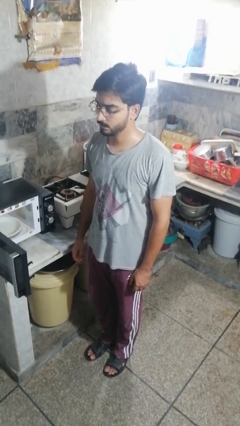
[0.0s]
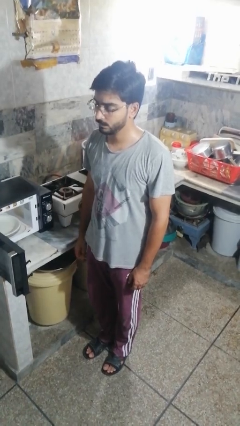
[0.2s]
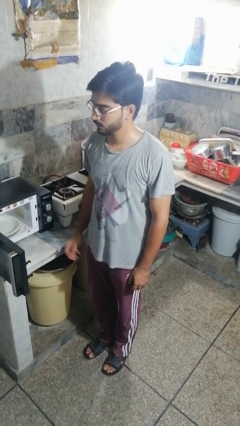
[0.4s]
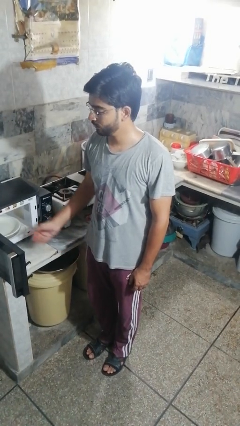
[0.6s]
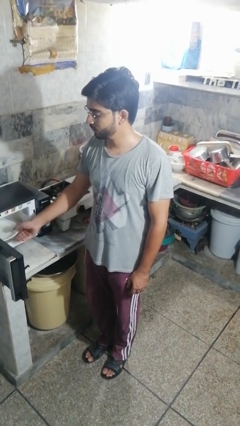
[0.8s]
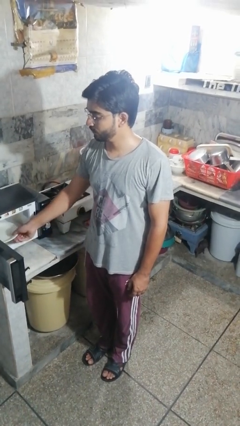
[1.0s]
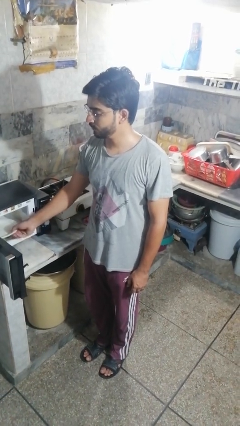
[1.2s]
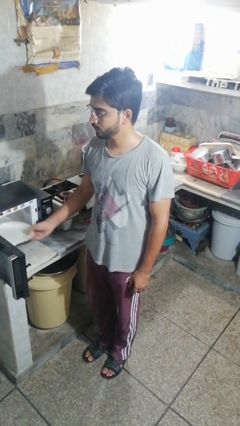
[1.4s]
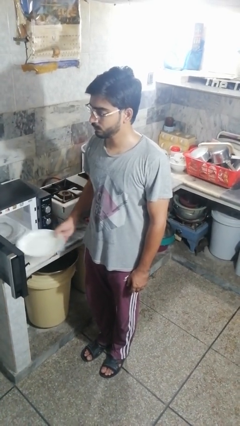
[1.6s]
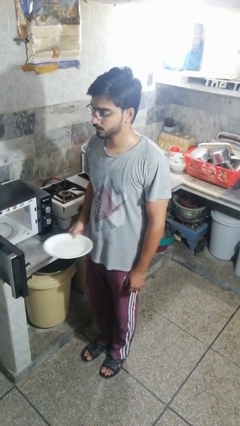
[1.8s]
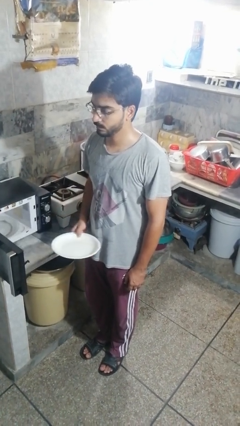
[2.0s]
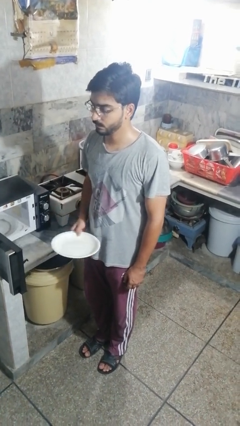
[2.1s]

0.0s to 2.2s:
person takes object from oven

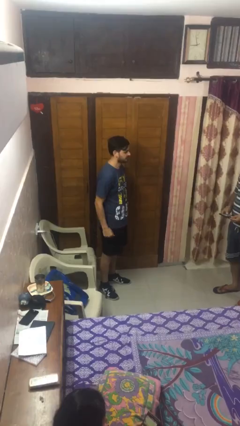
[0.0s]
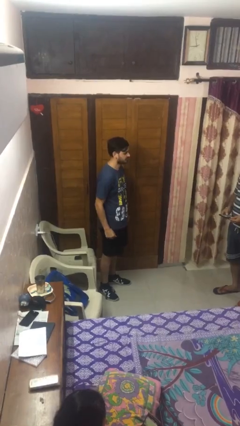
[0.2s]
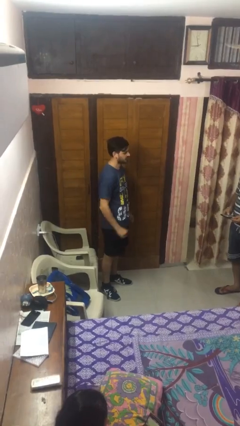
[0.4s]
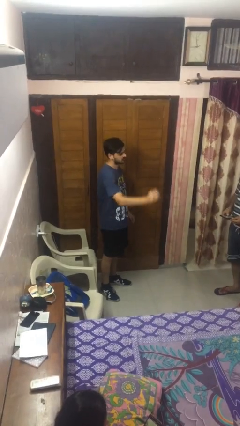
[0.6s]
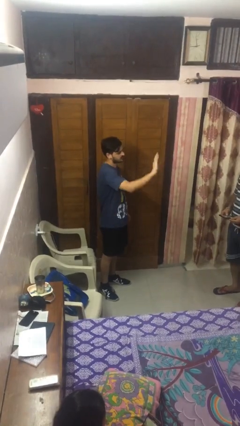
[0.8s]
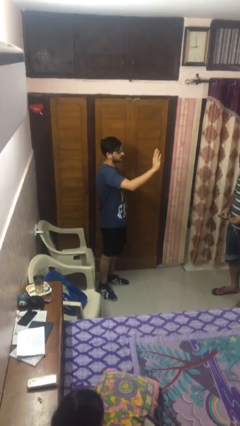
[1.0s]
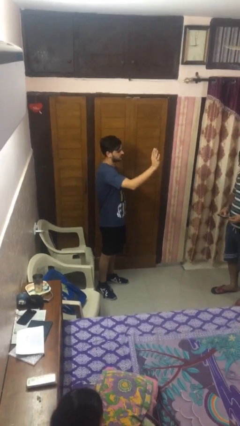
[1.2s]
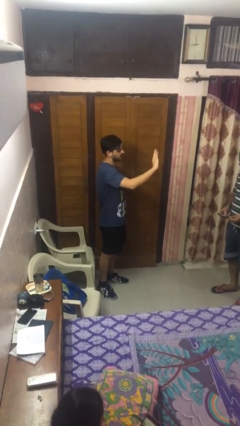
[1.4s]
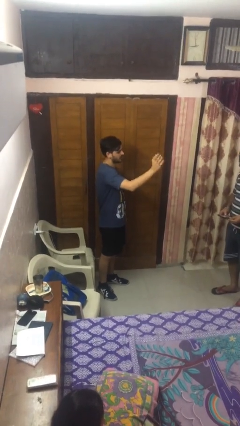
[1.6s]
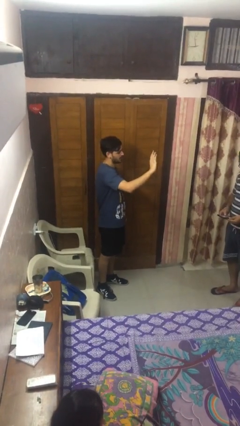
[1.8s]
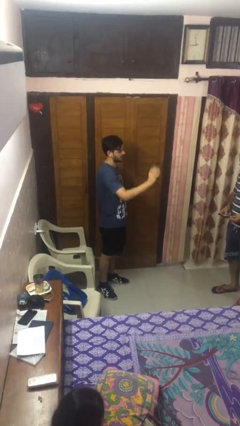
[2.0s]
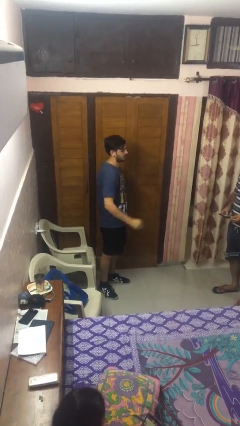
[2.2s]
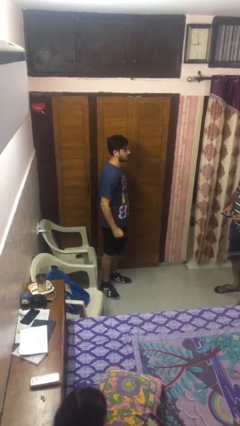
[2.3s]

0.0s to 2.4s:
person waves at person

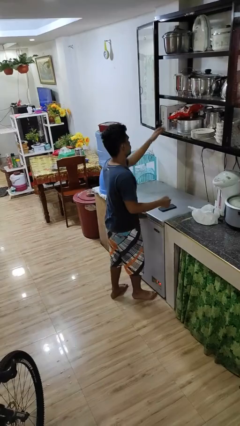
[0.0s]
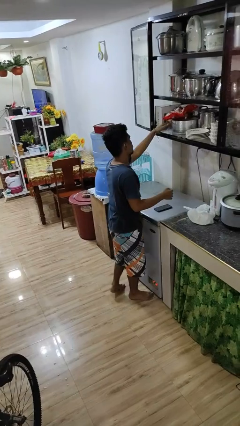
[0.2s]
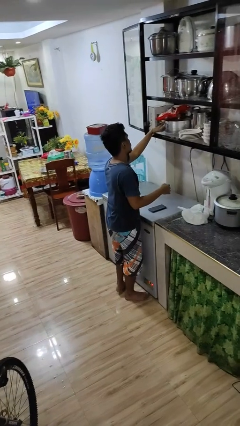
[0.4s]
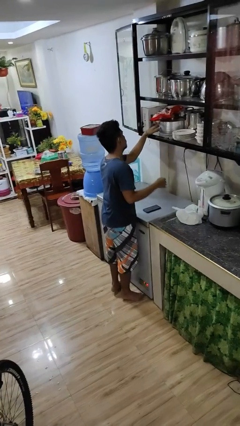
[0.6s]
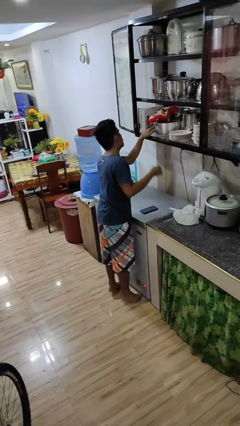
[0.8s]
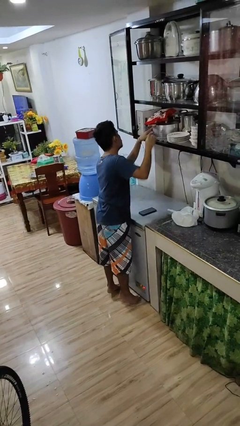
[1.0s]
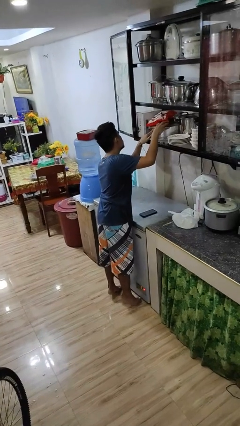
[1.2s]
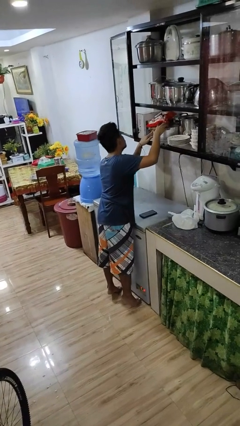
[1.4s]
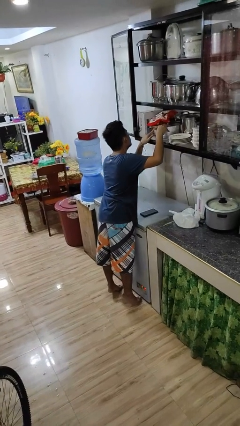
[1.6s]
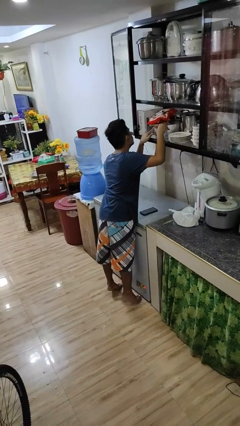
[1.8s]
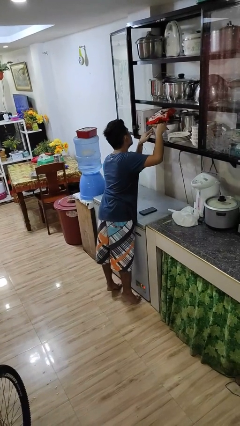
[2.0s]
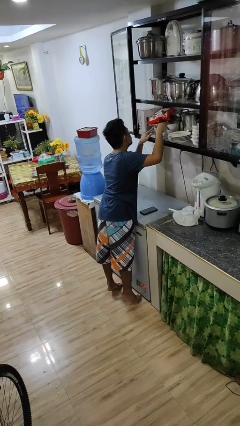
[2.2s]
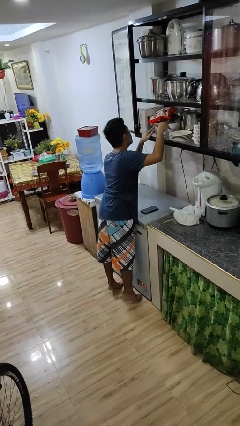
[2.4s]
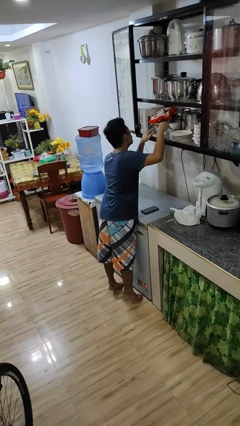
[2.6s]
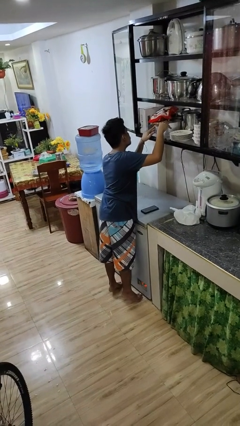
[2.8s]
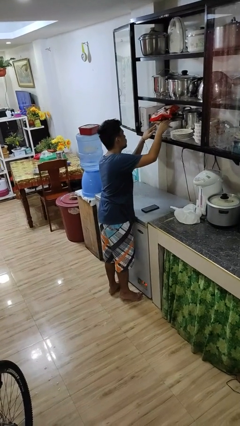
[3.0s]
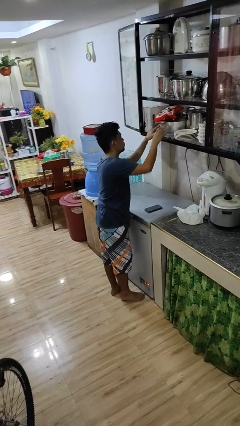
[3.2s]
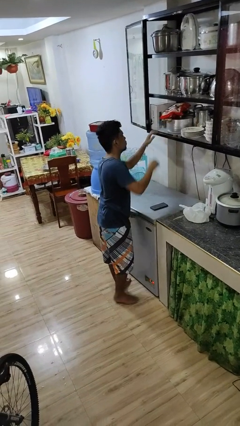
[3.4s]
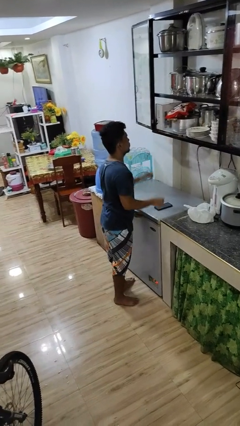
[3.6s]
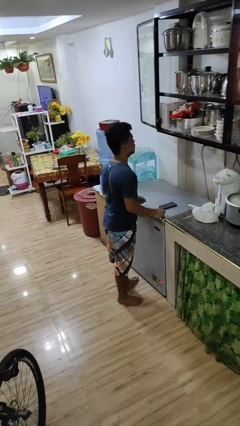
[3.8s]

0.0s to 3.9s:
person searches in cabinet

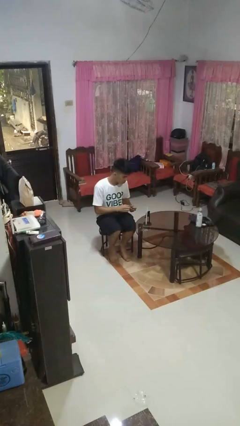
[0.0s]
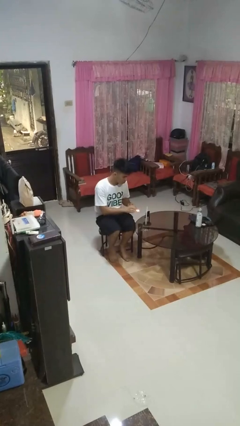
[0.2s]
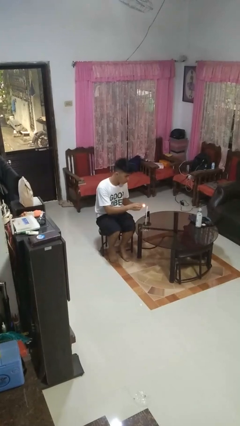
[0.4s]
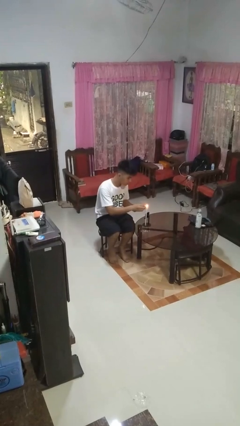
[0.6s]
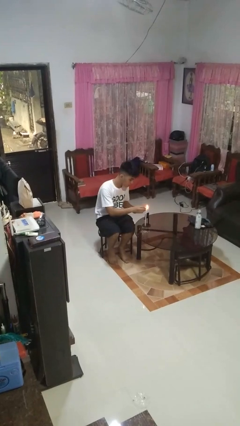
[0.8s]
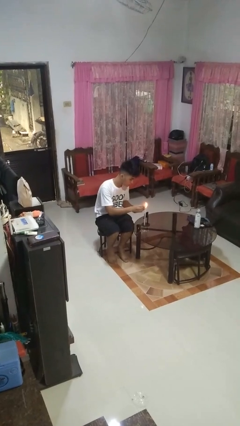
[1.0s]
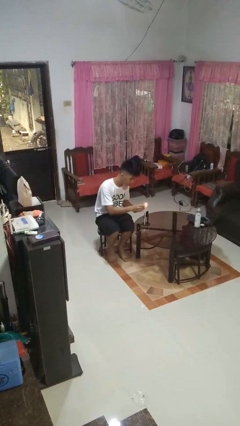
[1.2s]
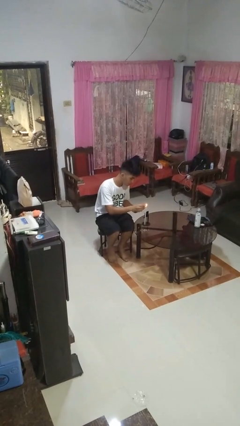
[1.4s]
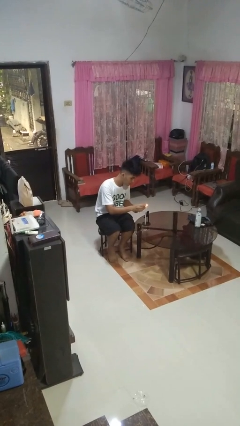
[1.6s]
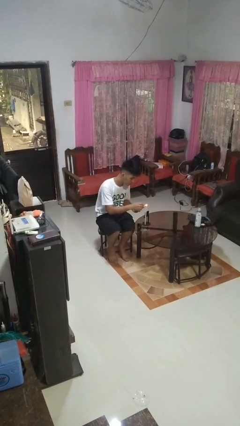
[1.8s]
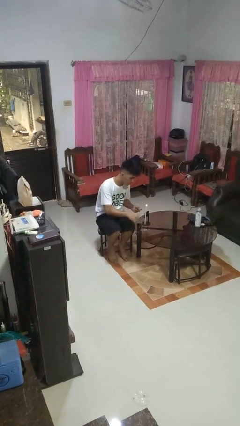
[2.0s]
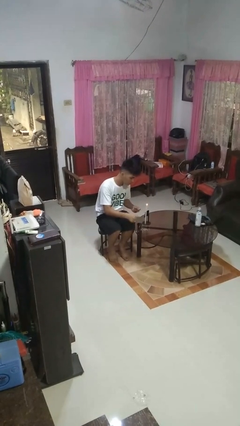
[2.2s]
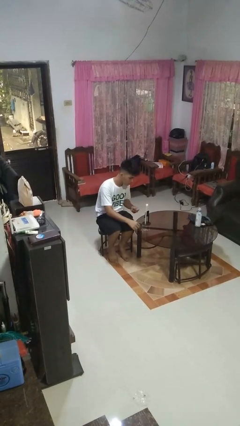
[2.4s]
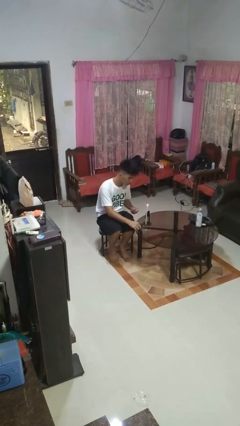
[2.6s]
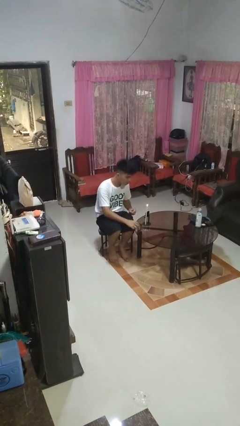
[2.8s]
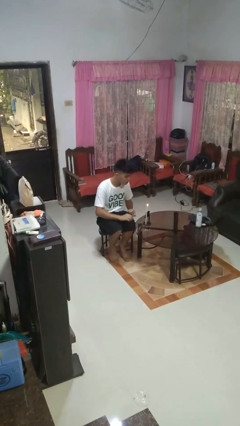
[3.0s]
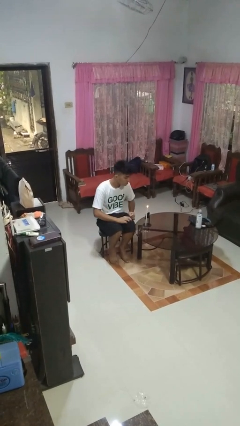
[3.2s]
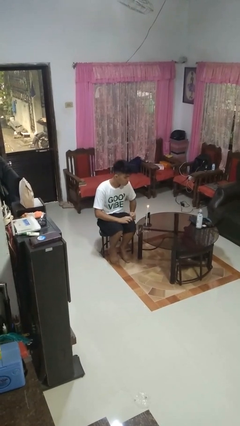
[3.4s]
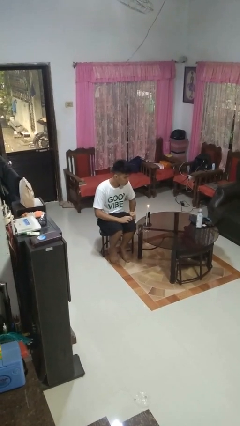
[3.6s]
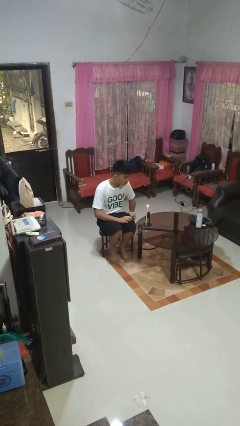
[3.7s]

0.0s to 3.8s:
person lights candle

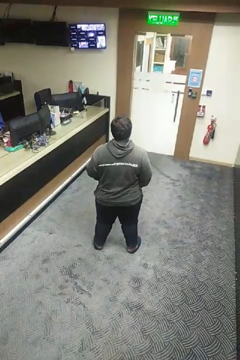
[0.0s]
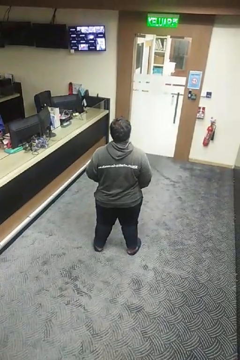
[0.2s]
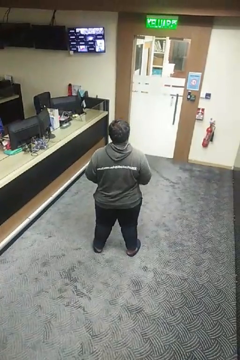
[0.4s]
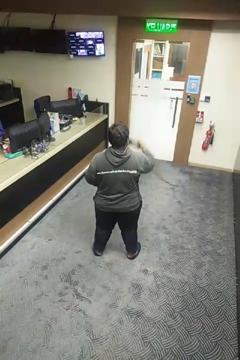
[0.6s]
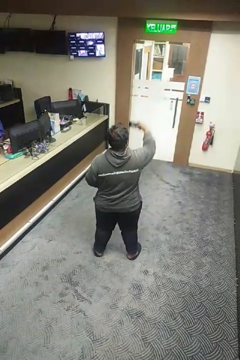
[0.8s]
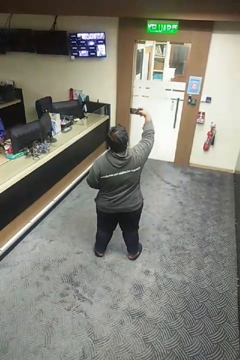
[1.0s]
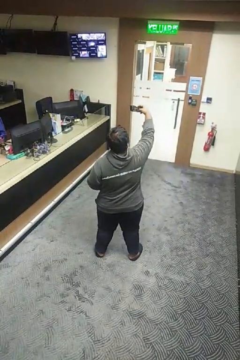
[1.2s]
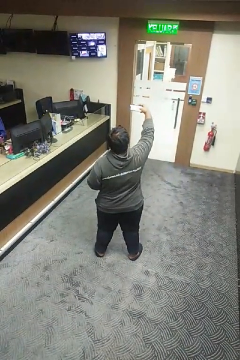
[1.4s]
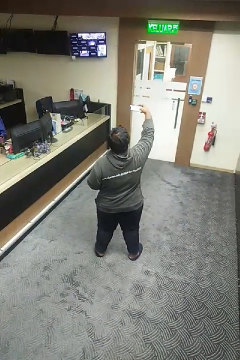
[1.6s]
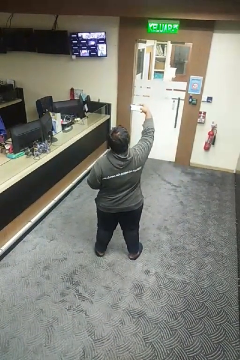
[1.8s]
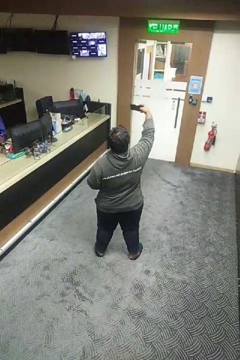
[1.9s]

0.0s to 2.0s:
person takes selfie

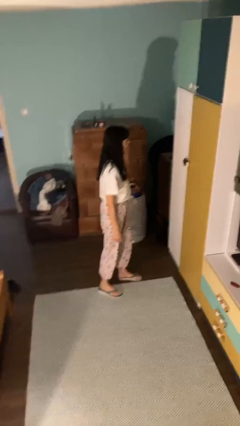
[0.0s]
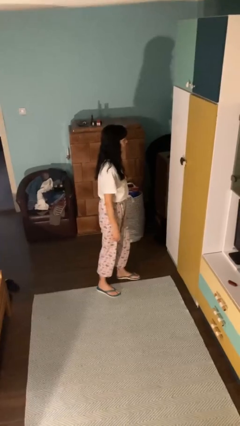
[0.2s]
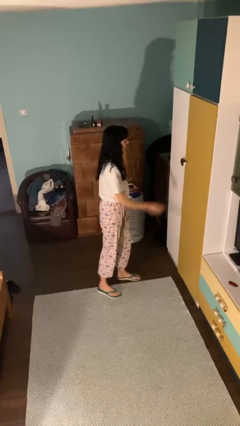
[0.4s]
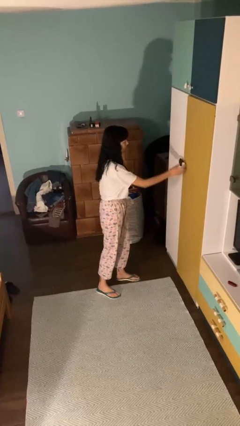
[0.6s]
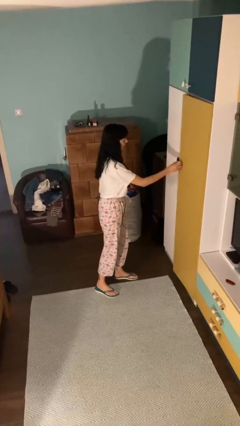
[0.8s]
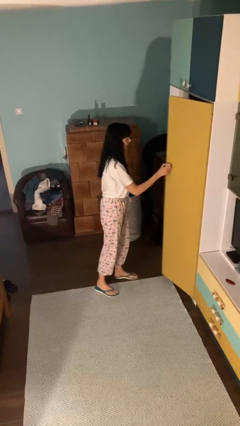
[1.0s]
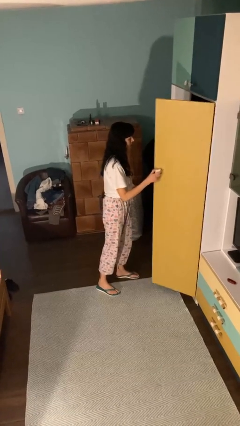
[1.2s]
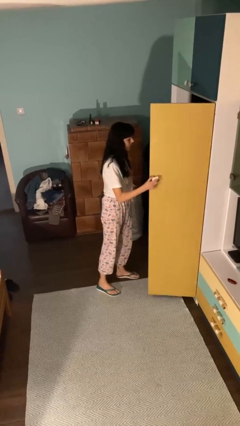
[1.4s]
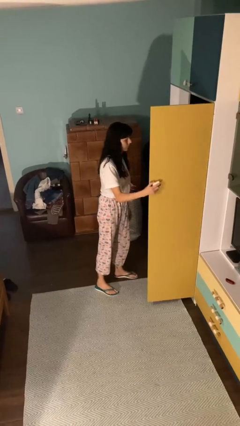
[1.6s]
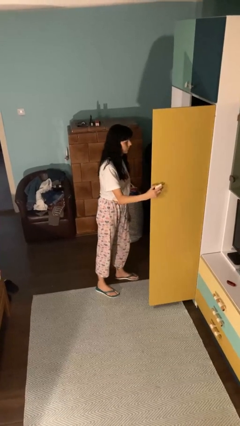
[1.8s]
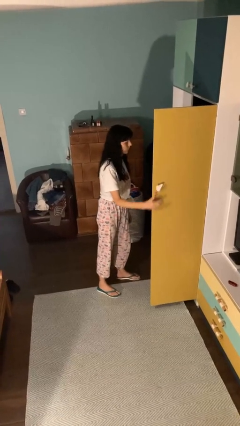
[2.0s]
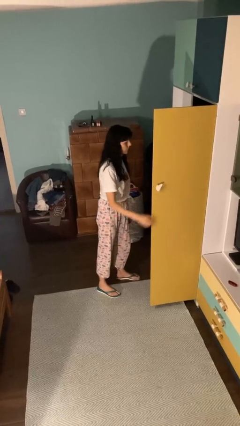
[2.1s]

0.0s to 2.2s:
person opens closet door

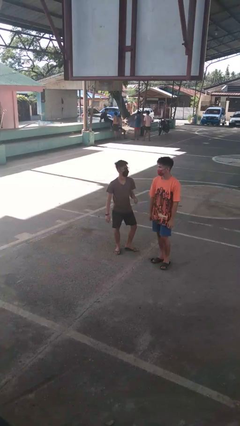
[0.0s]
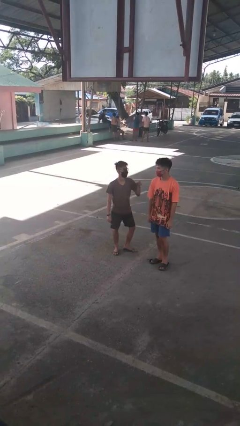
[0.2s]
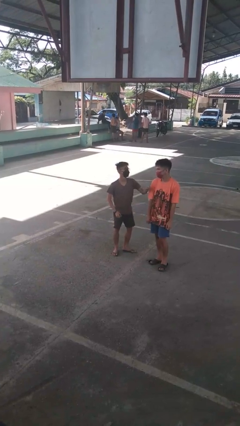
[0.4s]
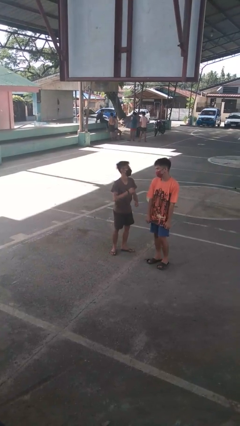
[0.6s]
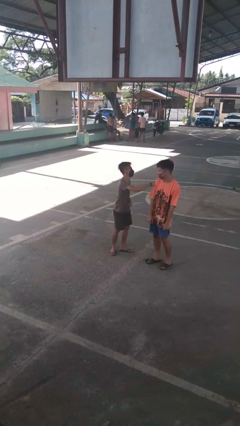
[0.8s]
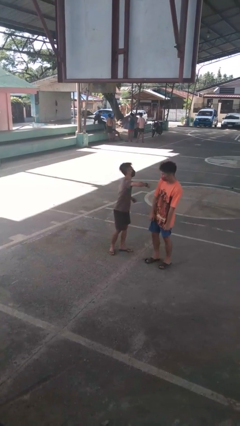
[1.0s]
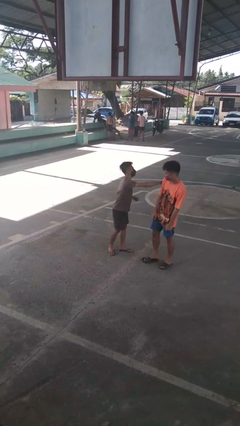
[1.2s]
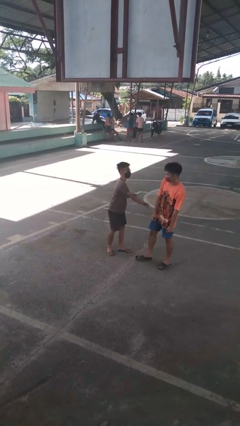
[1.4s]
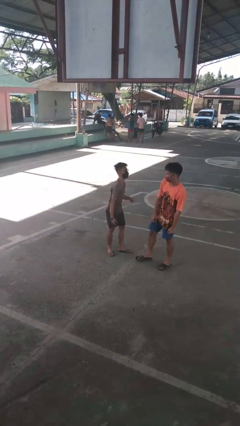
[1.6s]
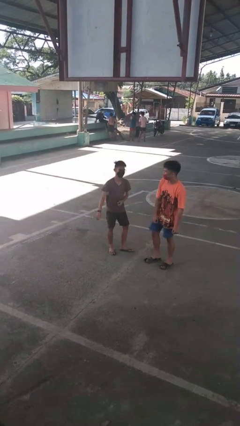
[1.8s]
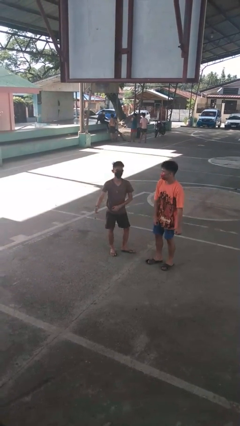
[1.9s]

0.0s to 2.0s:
person pounds shoulders of person
